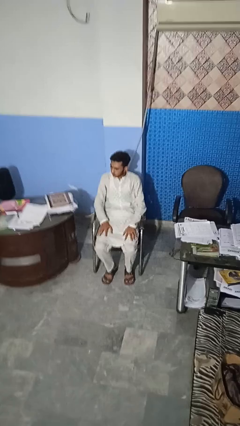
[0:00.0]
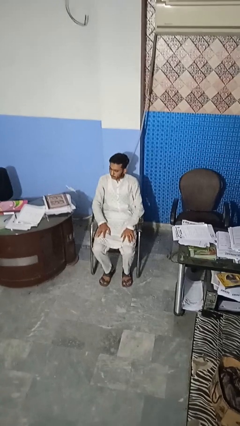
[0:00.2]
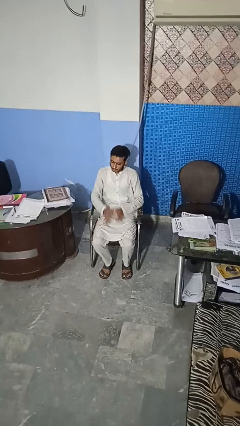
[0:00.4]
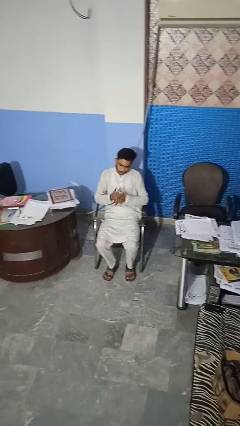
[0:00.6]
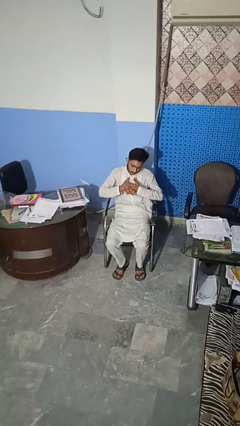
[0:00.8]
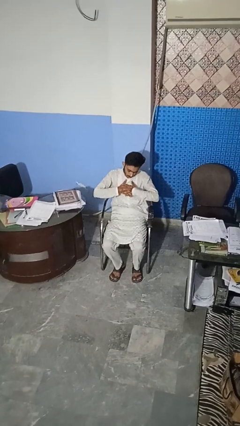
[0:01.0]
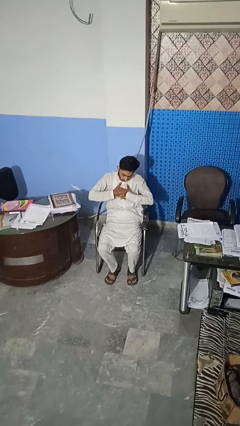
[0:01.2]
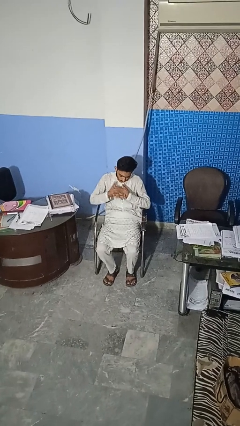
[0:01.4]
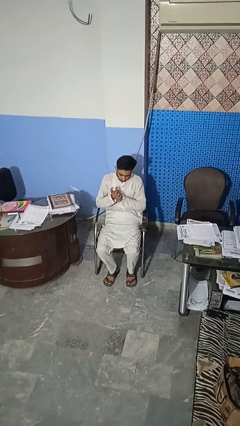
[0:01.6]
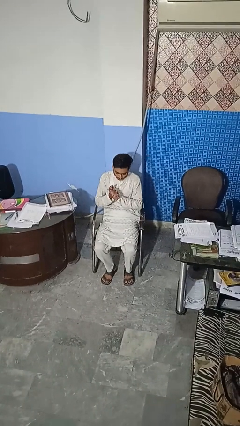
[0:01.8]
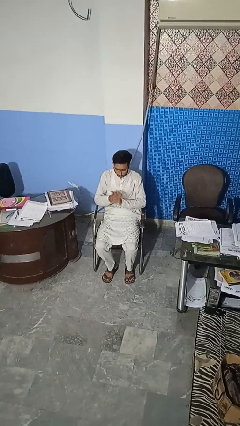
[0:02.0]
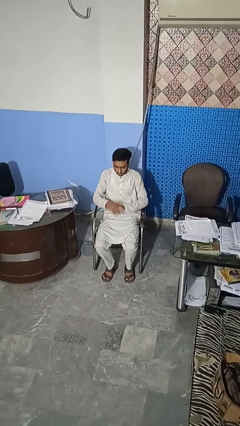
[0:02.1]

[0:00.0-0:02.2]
person cracks knuckles

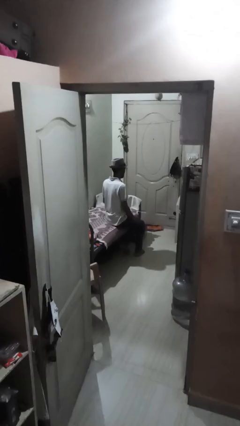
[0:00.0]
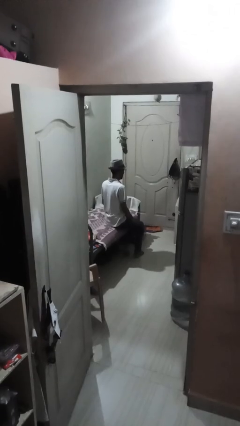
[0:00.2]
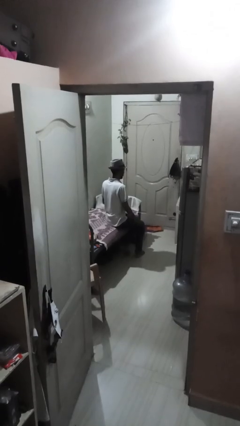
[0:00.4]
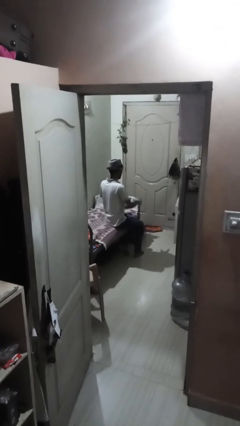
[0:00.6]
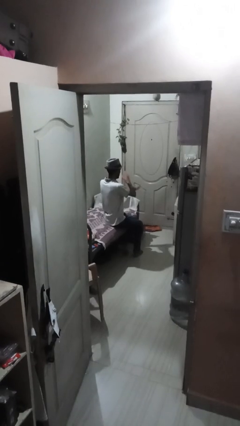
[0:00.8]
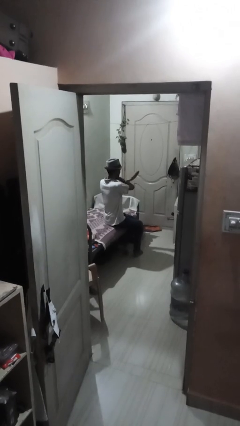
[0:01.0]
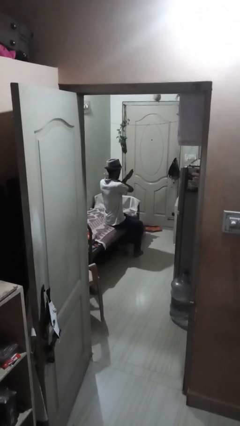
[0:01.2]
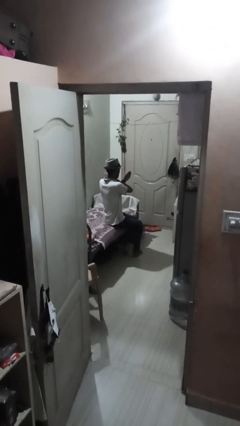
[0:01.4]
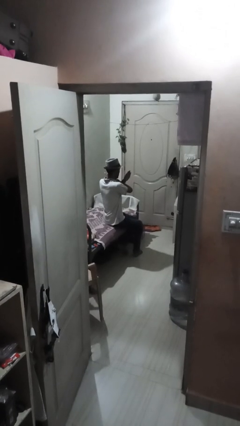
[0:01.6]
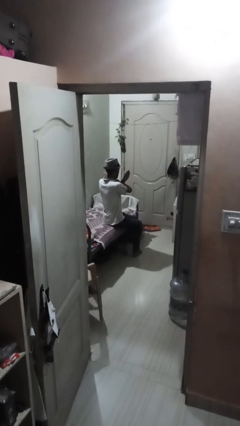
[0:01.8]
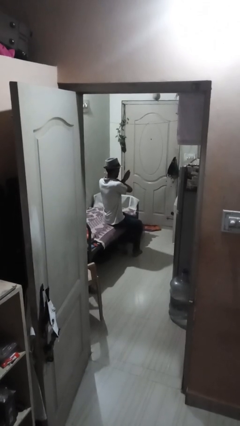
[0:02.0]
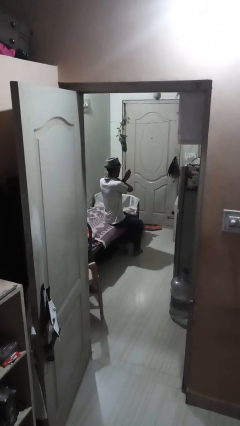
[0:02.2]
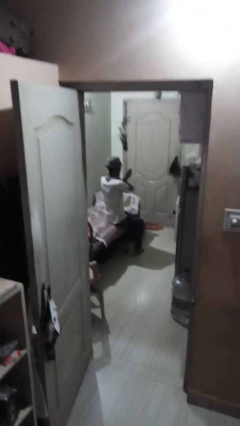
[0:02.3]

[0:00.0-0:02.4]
person gestures arms x

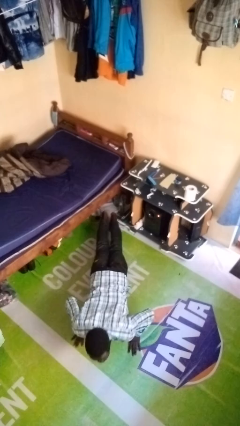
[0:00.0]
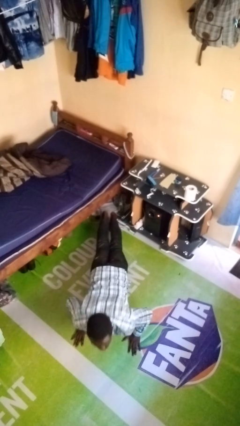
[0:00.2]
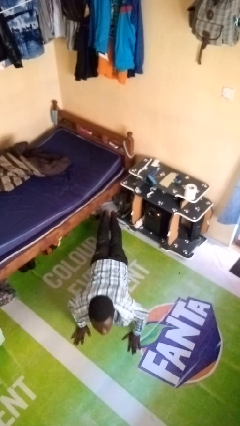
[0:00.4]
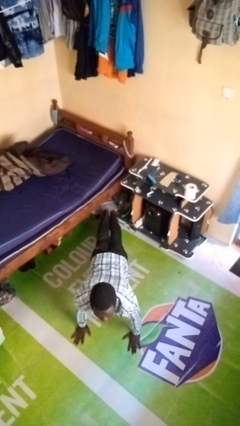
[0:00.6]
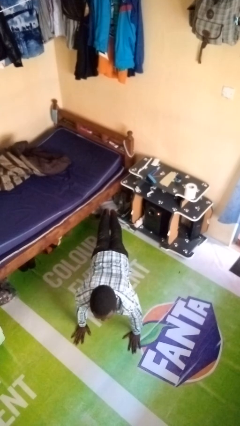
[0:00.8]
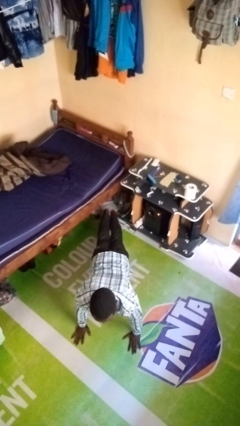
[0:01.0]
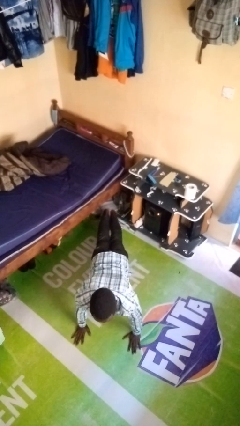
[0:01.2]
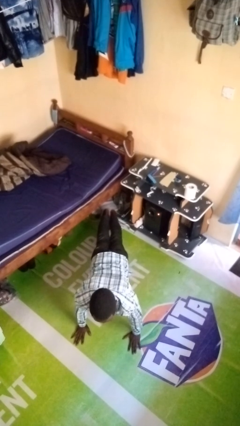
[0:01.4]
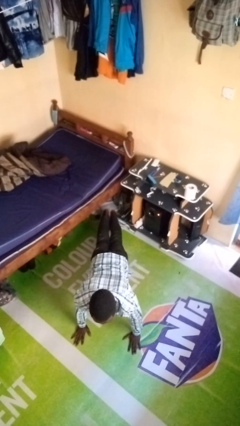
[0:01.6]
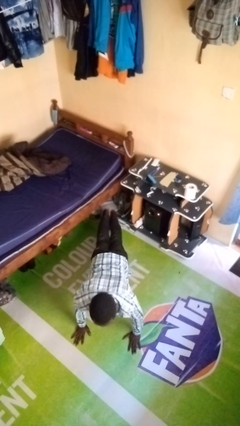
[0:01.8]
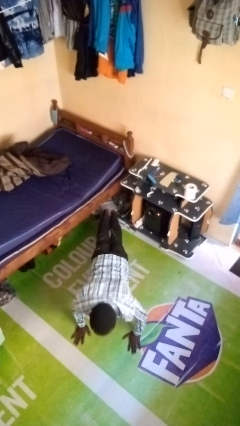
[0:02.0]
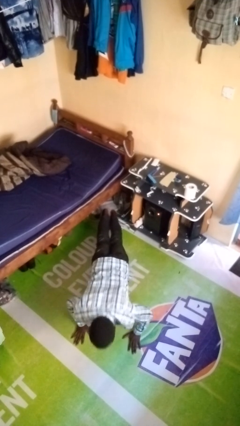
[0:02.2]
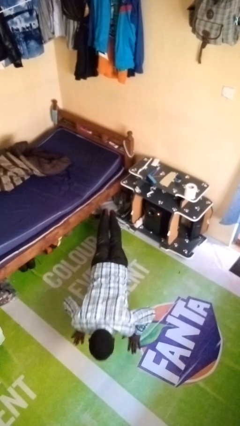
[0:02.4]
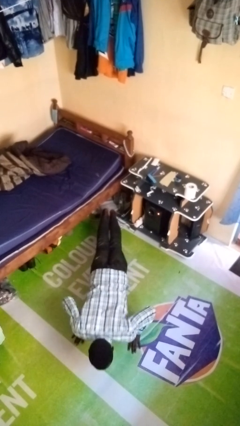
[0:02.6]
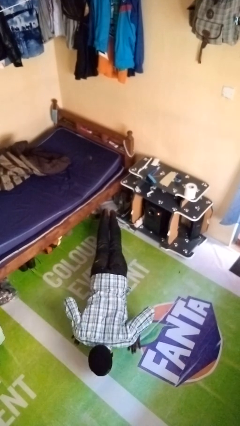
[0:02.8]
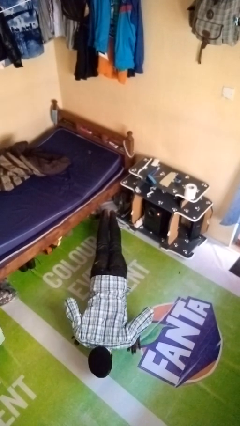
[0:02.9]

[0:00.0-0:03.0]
person exercises with pushup

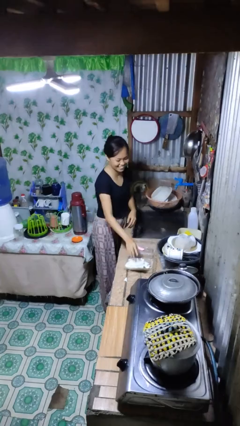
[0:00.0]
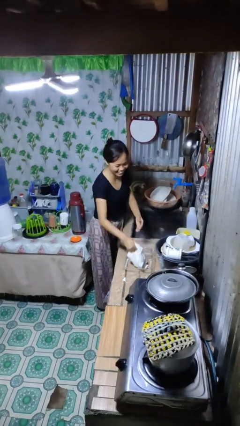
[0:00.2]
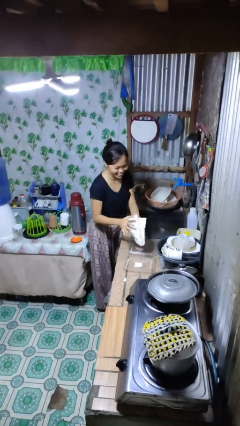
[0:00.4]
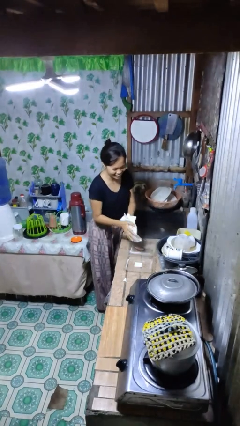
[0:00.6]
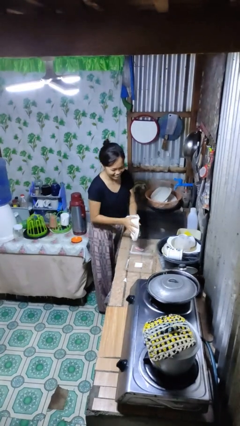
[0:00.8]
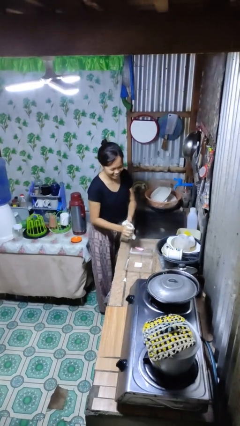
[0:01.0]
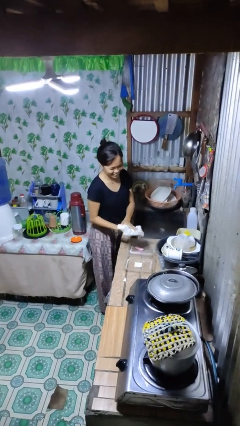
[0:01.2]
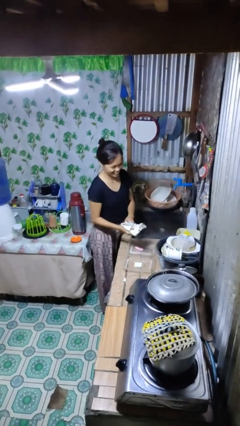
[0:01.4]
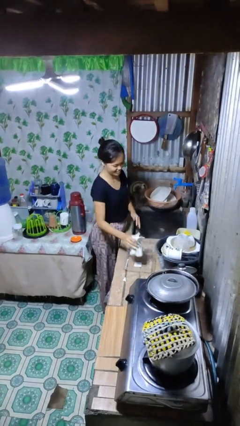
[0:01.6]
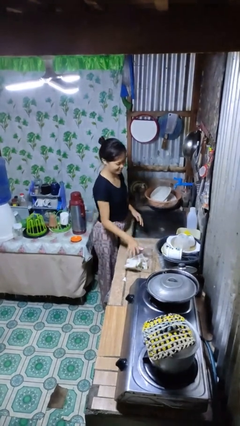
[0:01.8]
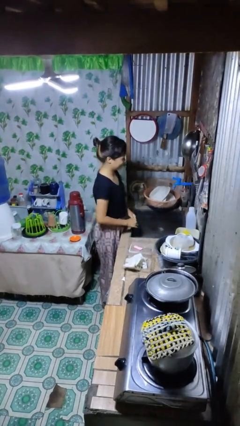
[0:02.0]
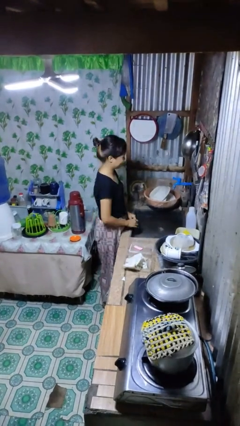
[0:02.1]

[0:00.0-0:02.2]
person dries hands with towel

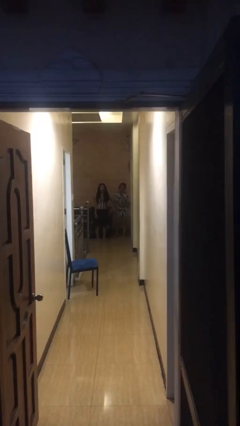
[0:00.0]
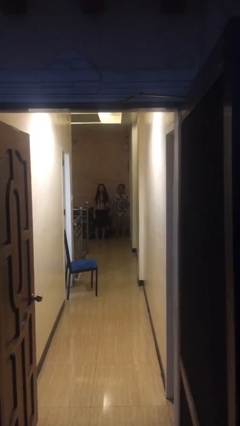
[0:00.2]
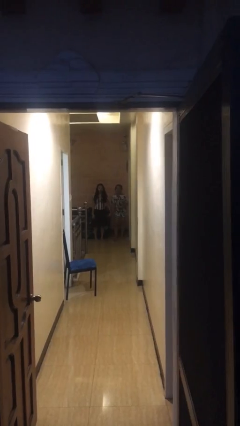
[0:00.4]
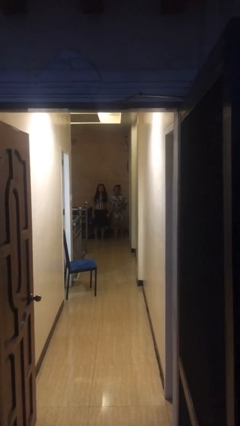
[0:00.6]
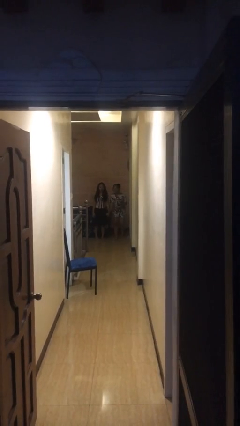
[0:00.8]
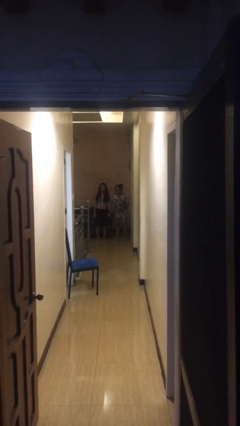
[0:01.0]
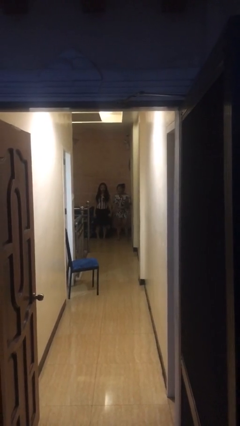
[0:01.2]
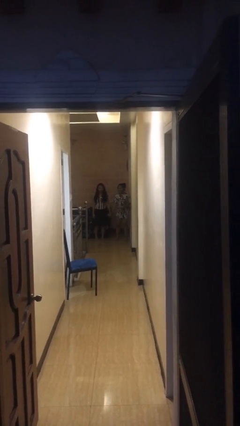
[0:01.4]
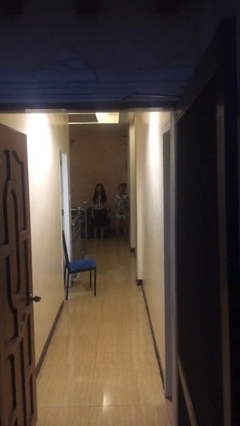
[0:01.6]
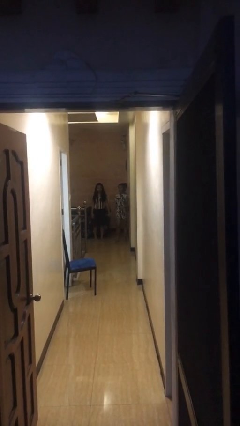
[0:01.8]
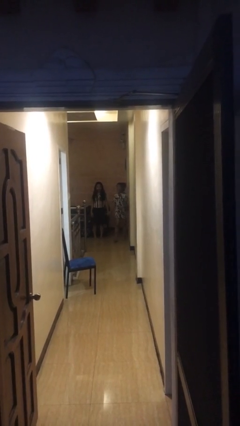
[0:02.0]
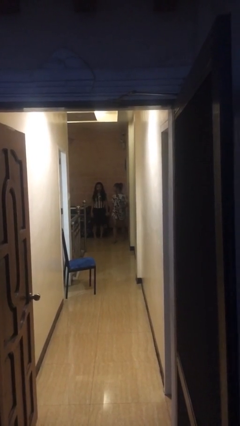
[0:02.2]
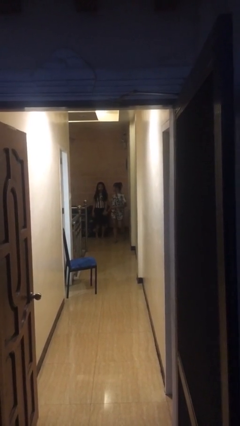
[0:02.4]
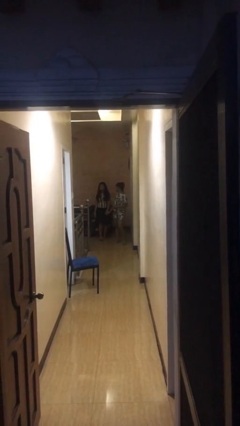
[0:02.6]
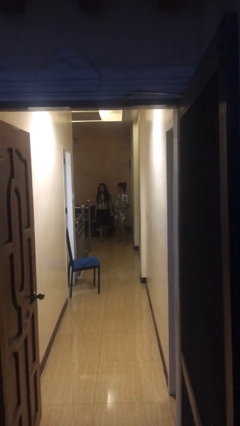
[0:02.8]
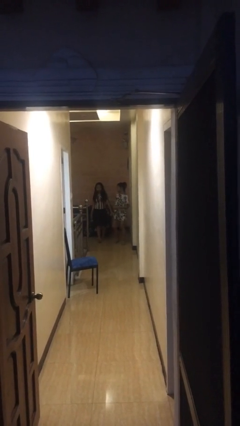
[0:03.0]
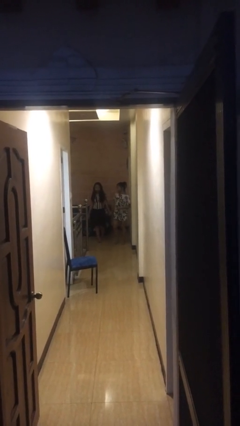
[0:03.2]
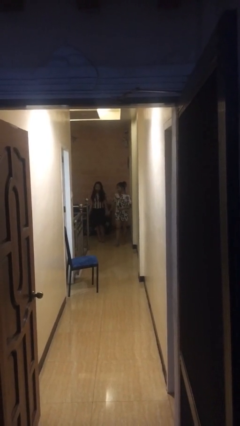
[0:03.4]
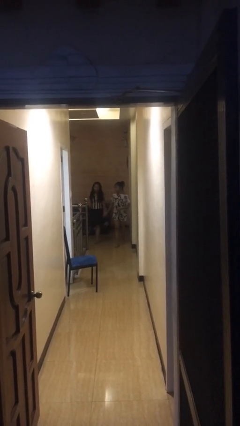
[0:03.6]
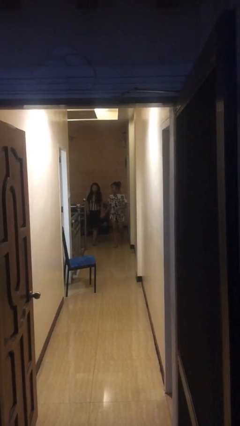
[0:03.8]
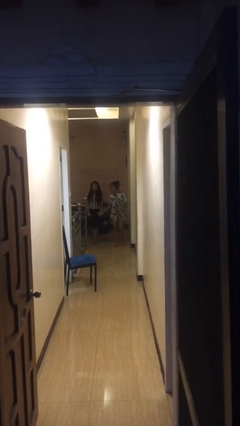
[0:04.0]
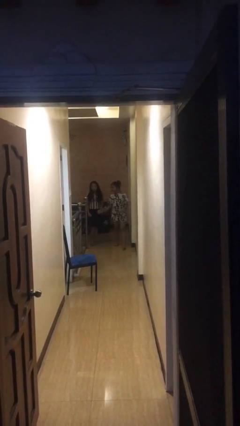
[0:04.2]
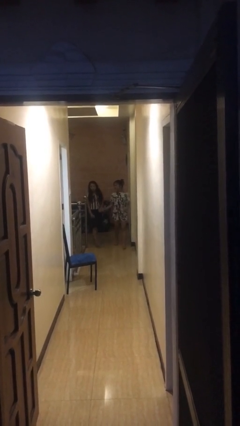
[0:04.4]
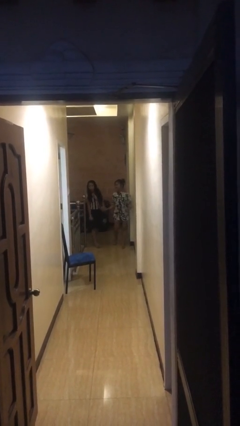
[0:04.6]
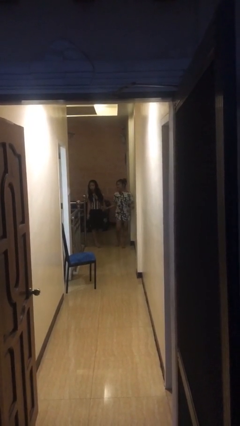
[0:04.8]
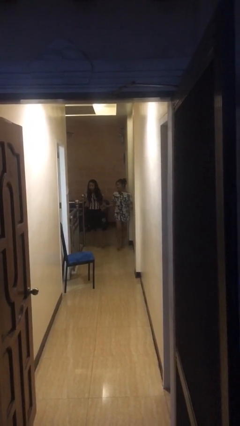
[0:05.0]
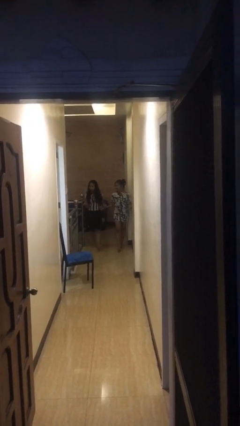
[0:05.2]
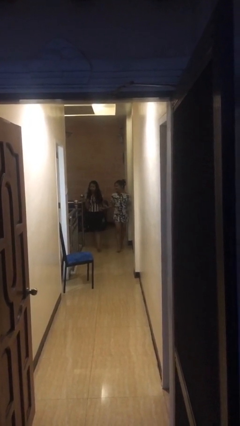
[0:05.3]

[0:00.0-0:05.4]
person holds hand

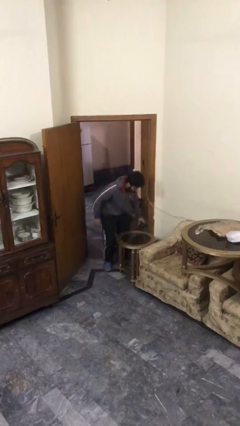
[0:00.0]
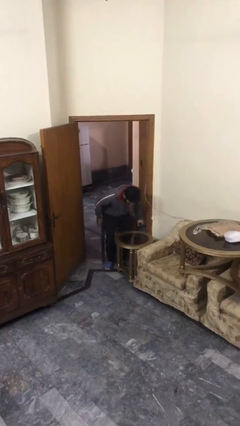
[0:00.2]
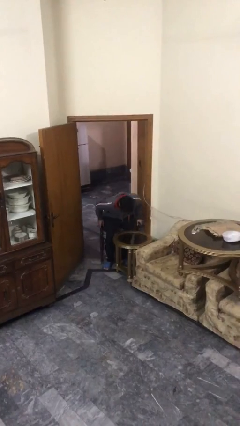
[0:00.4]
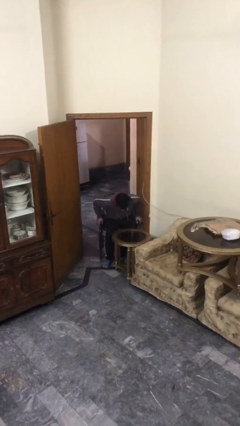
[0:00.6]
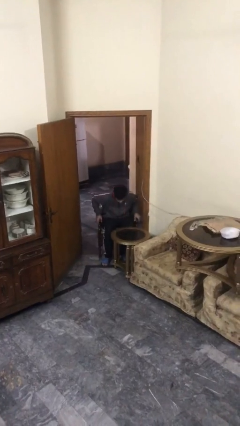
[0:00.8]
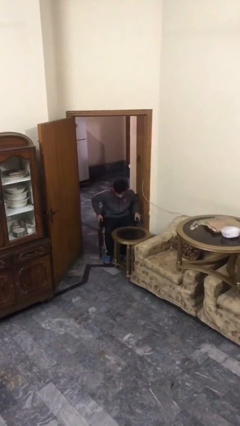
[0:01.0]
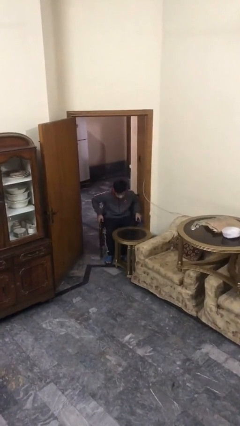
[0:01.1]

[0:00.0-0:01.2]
person sits down

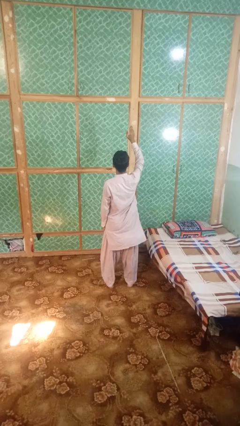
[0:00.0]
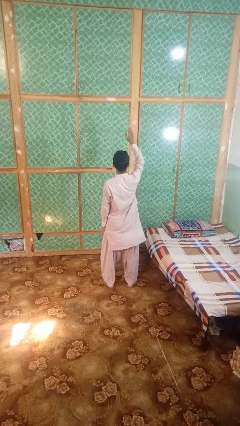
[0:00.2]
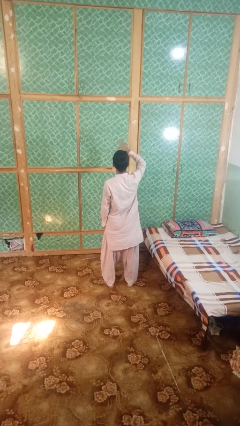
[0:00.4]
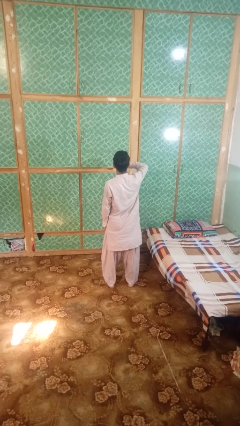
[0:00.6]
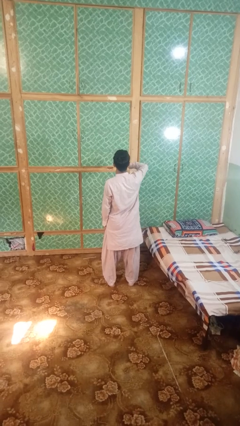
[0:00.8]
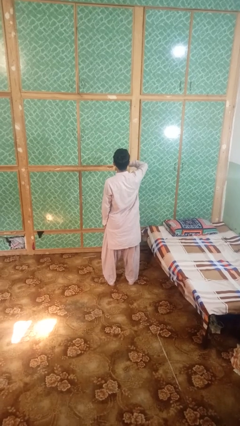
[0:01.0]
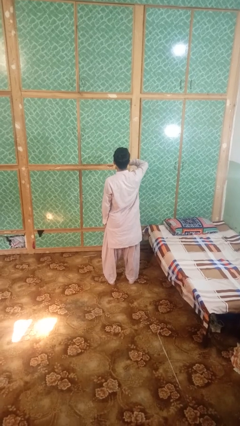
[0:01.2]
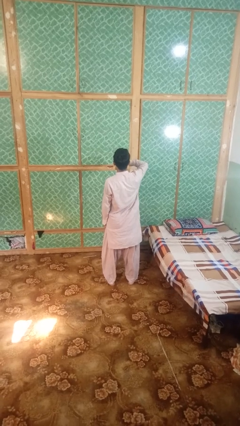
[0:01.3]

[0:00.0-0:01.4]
person gestures swipe down
